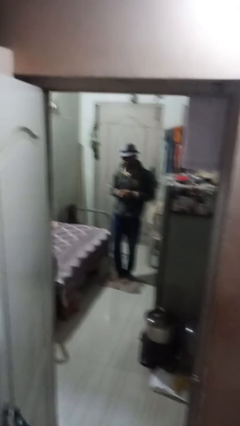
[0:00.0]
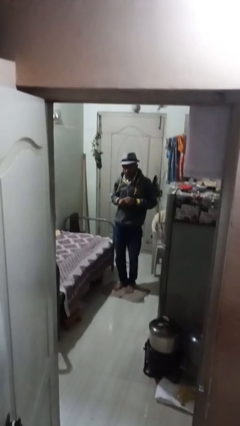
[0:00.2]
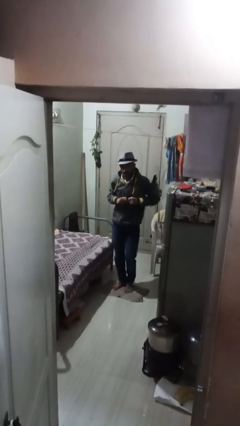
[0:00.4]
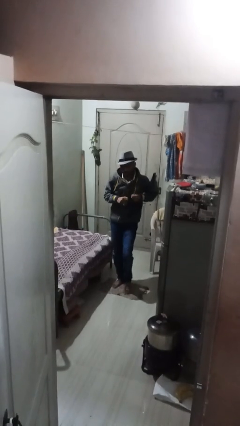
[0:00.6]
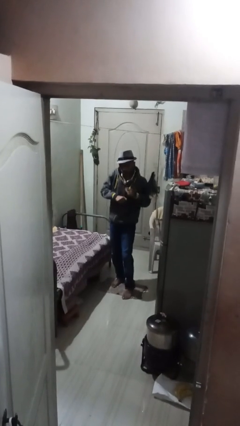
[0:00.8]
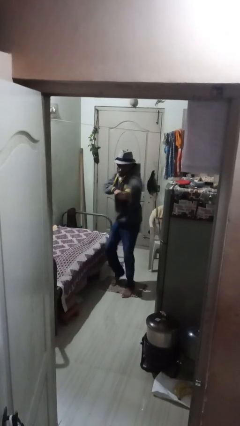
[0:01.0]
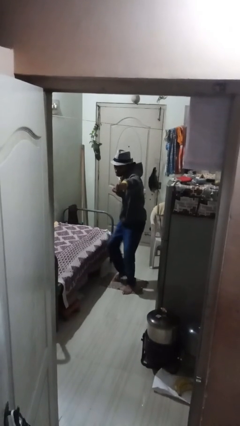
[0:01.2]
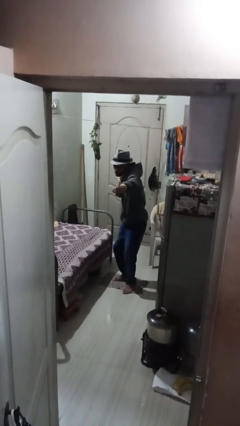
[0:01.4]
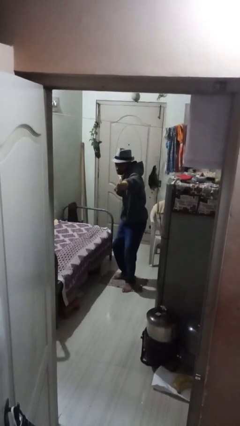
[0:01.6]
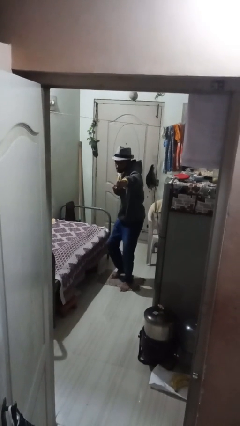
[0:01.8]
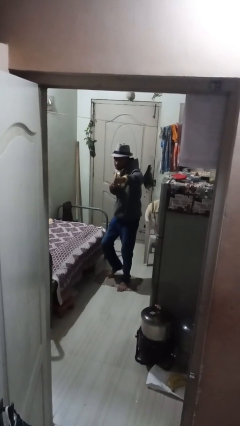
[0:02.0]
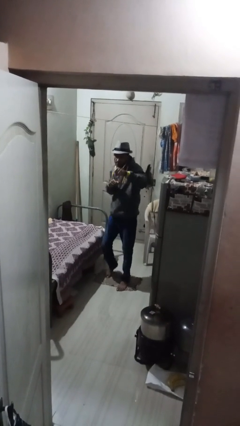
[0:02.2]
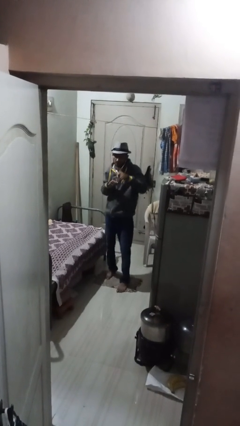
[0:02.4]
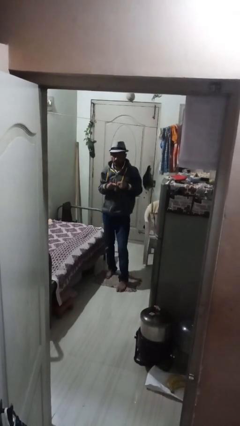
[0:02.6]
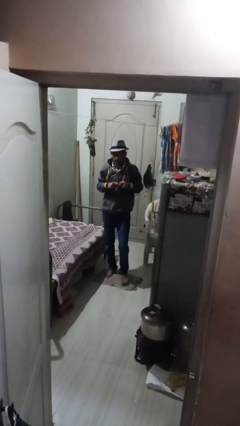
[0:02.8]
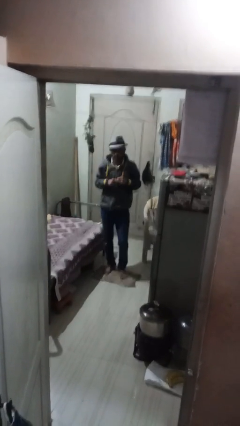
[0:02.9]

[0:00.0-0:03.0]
person punches

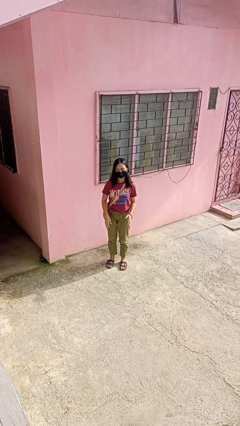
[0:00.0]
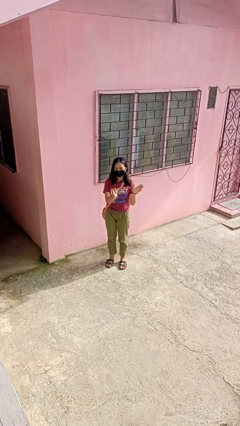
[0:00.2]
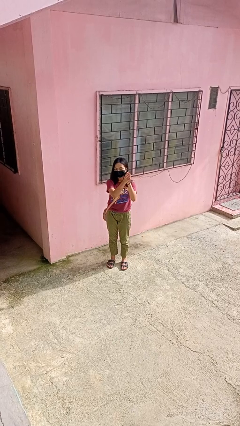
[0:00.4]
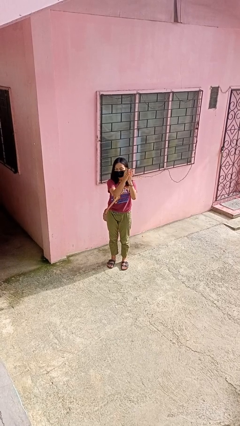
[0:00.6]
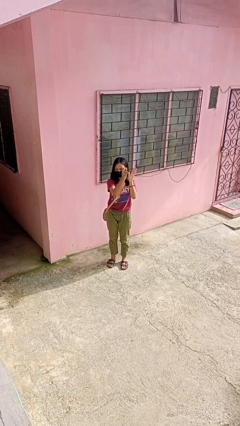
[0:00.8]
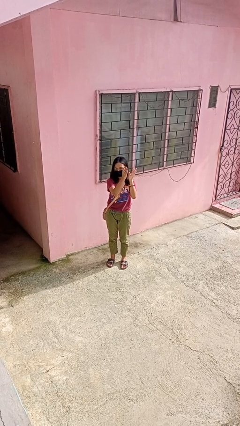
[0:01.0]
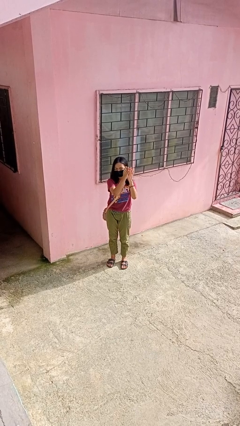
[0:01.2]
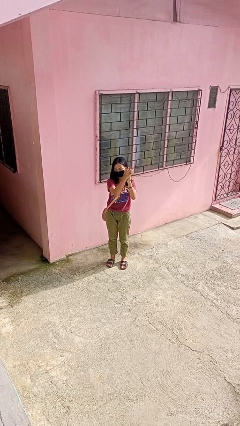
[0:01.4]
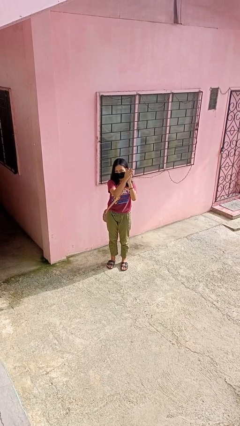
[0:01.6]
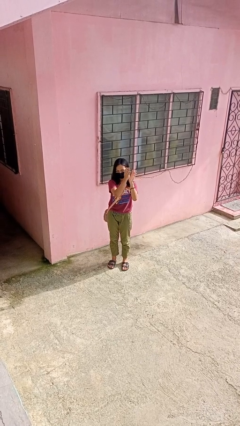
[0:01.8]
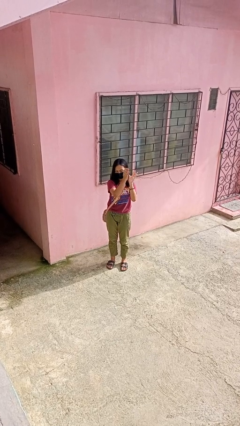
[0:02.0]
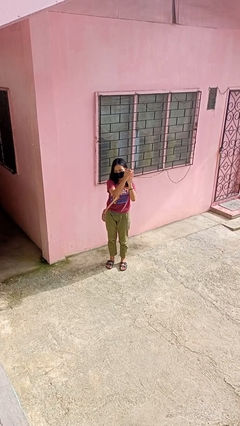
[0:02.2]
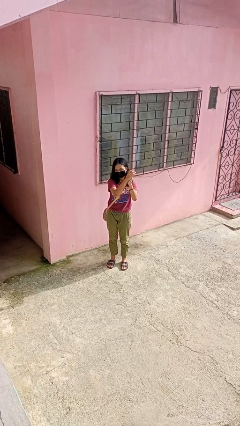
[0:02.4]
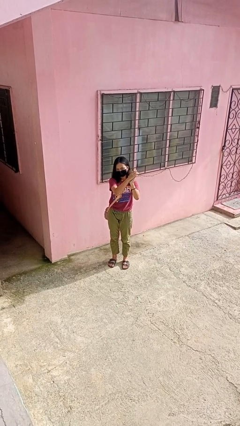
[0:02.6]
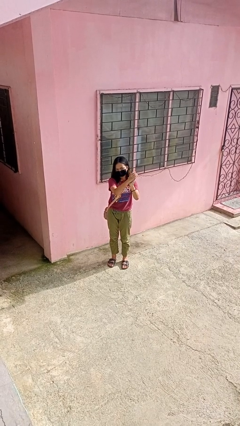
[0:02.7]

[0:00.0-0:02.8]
person claps hands

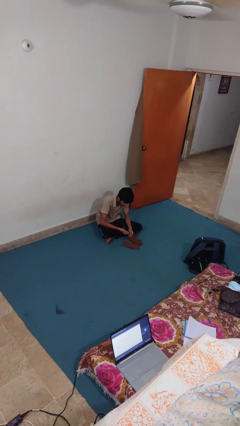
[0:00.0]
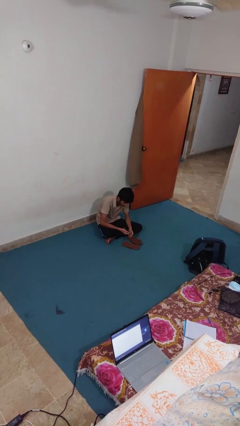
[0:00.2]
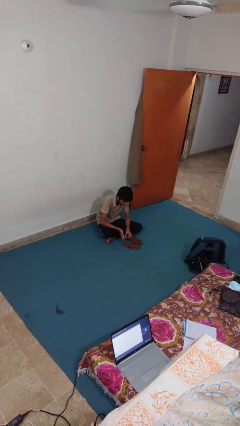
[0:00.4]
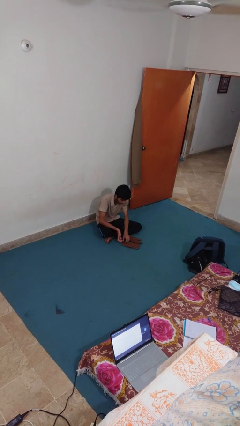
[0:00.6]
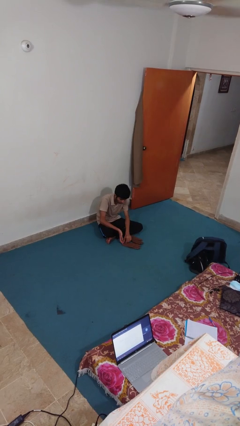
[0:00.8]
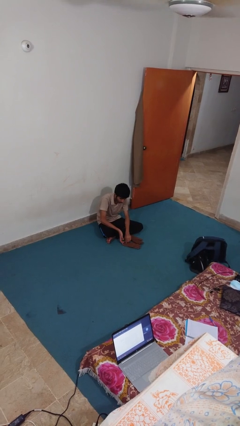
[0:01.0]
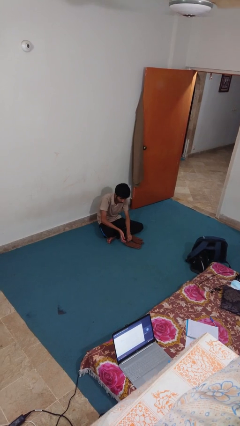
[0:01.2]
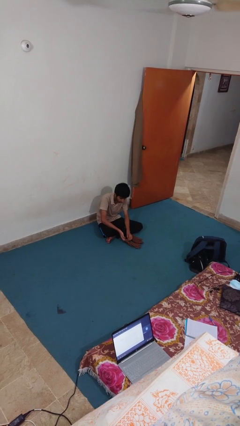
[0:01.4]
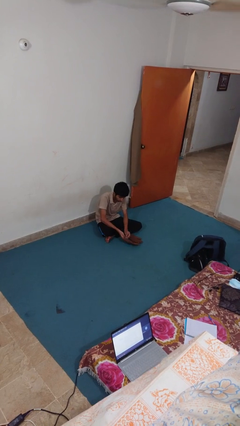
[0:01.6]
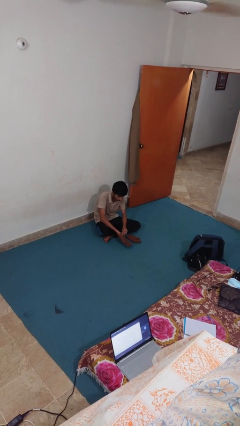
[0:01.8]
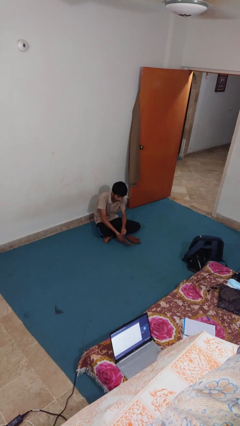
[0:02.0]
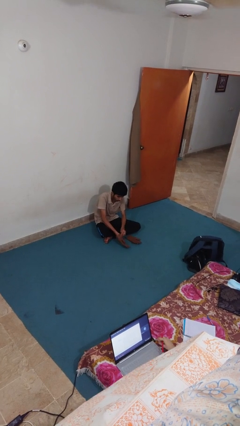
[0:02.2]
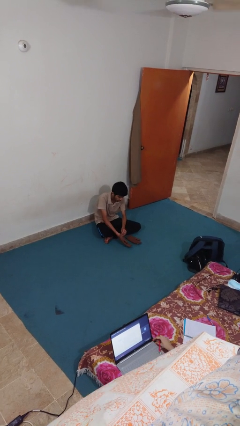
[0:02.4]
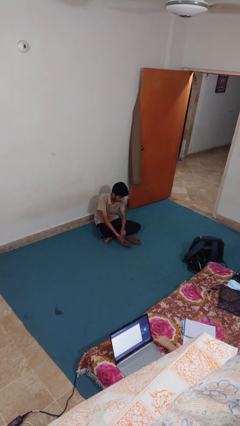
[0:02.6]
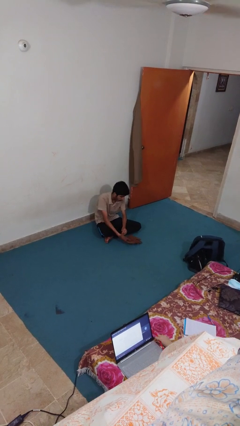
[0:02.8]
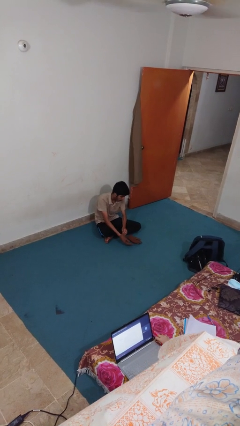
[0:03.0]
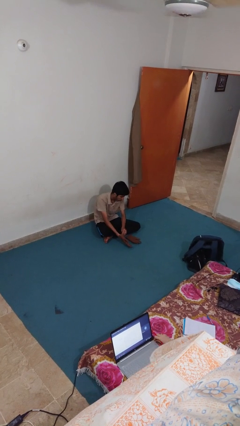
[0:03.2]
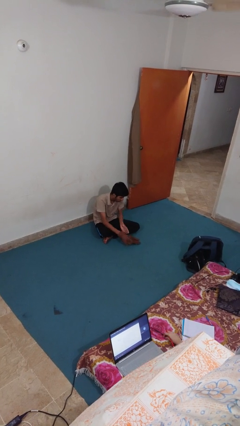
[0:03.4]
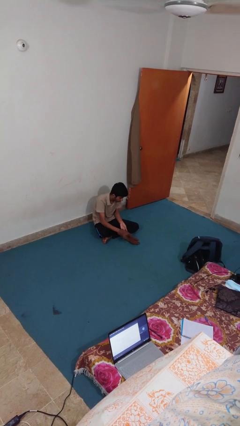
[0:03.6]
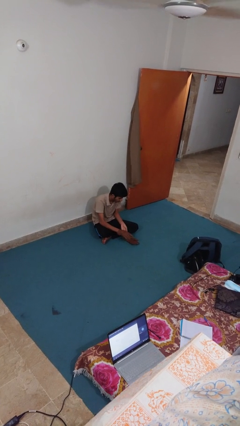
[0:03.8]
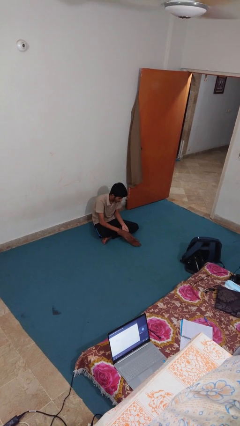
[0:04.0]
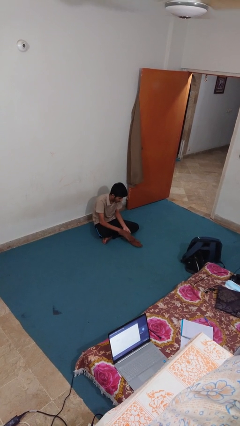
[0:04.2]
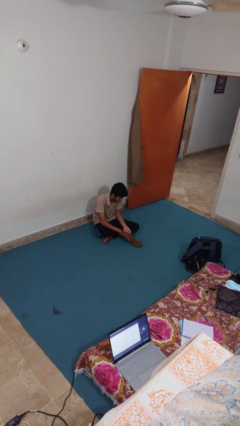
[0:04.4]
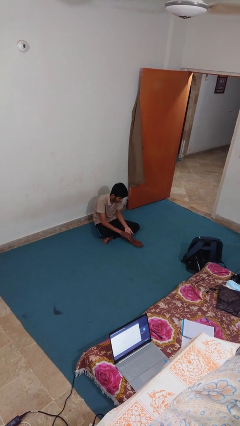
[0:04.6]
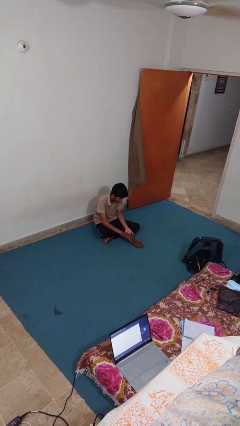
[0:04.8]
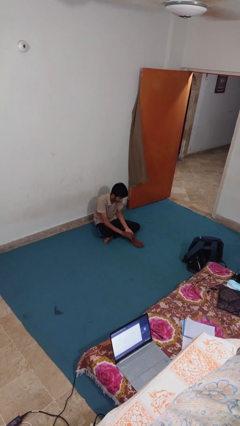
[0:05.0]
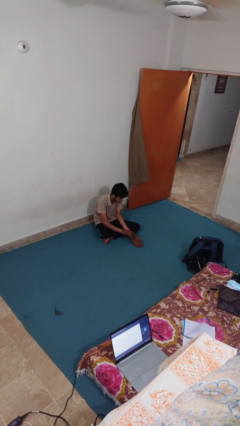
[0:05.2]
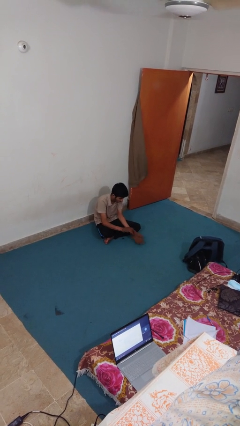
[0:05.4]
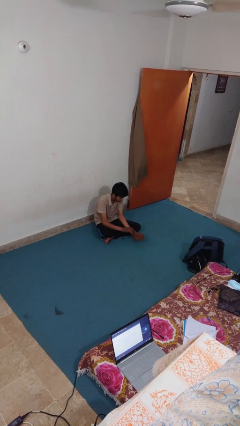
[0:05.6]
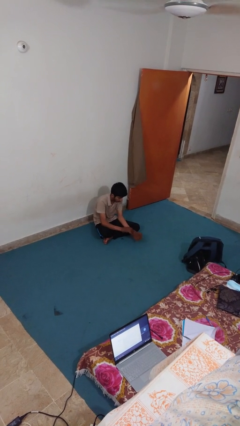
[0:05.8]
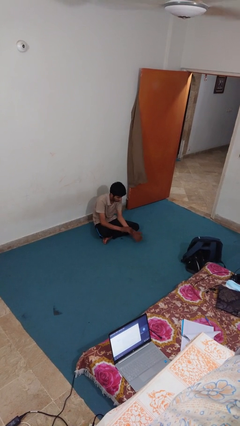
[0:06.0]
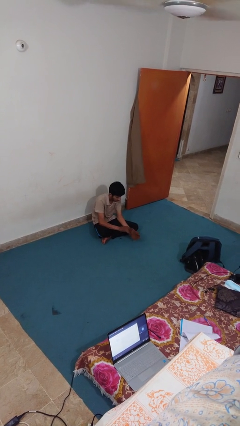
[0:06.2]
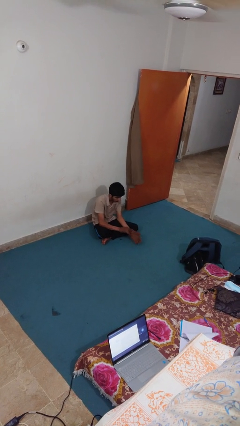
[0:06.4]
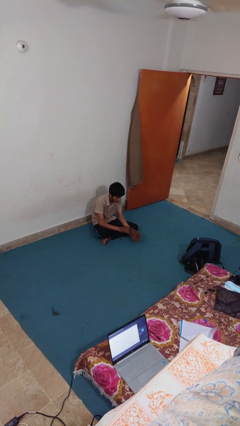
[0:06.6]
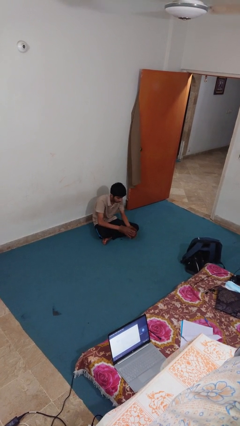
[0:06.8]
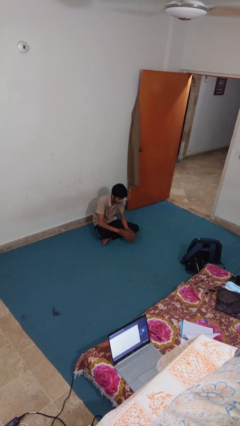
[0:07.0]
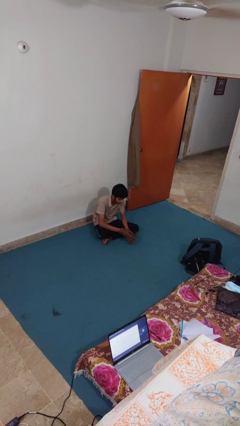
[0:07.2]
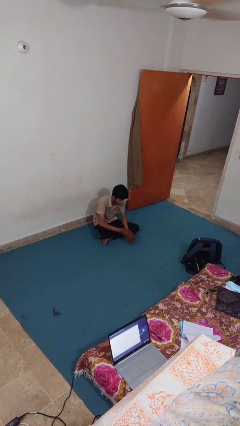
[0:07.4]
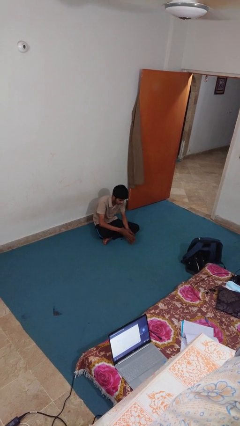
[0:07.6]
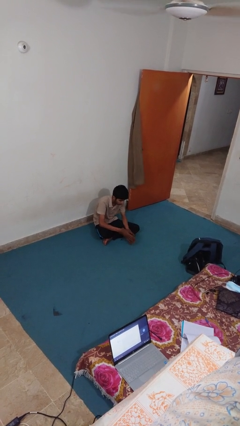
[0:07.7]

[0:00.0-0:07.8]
person puts on gloves

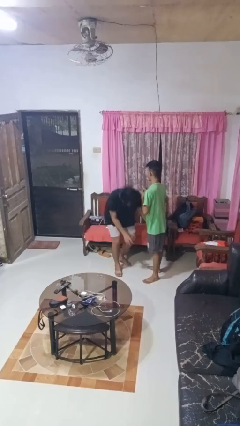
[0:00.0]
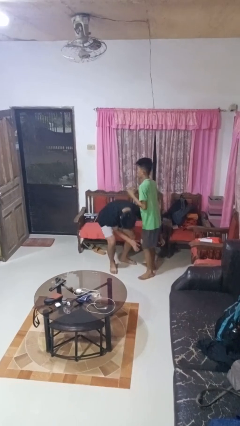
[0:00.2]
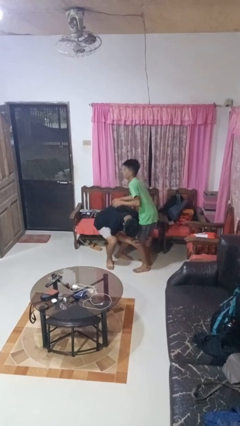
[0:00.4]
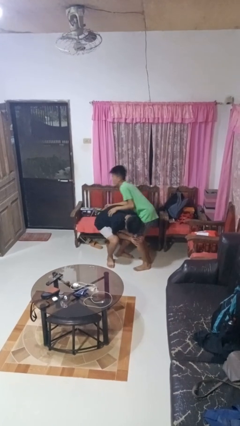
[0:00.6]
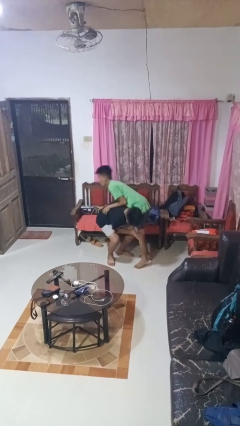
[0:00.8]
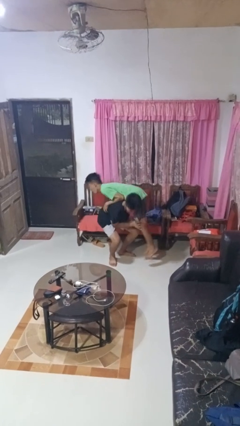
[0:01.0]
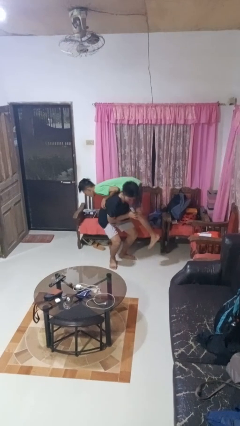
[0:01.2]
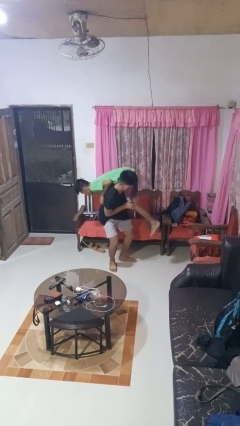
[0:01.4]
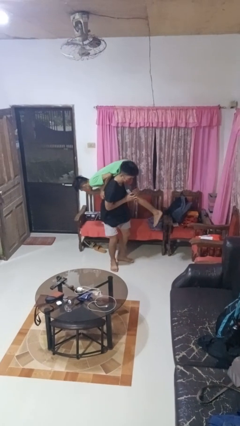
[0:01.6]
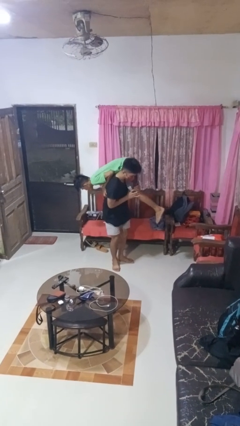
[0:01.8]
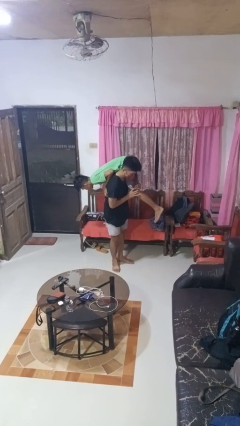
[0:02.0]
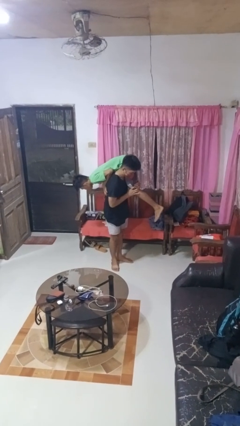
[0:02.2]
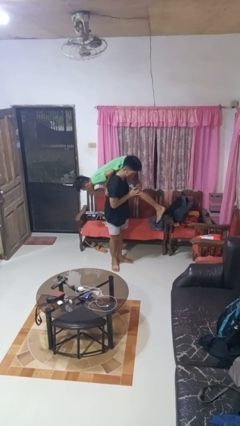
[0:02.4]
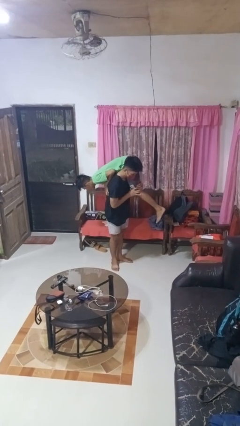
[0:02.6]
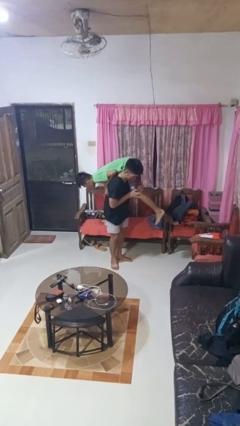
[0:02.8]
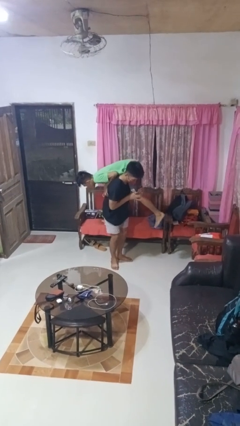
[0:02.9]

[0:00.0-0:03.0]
person carries person over shoulder

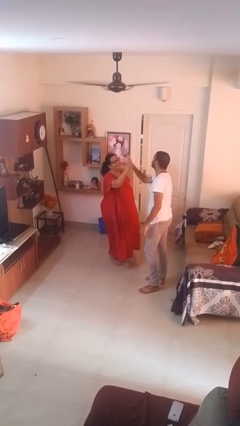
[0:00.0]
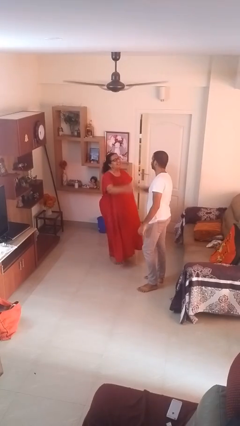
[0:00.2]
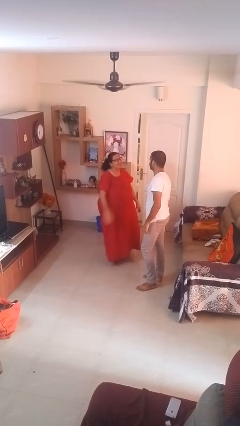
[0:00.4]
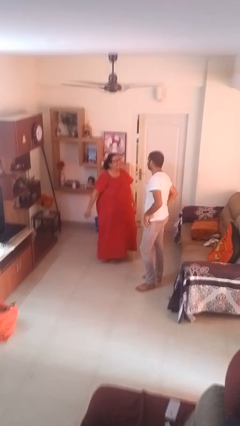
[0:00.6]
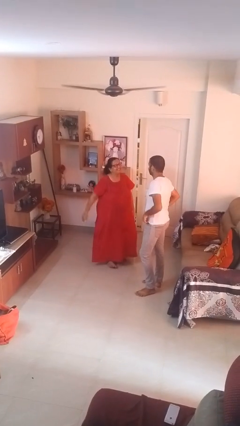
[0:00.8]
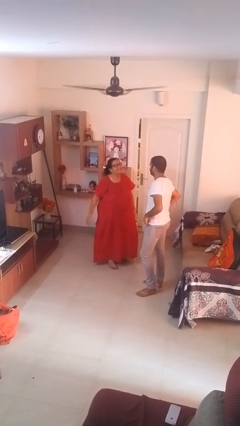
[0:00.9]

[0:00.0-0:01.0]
person highfives hand
